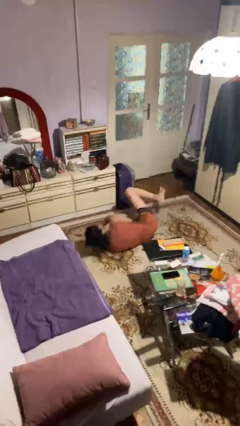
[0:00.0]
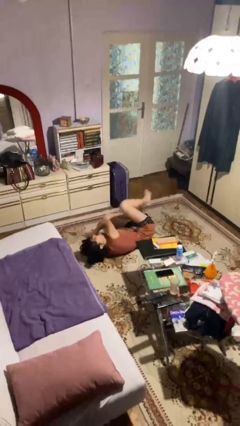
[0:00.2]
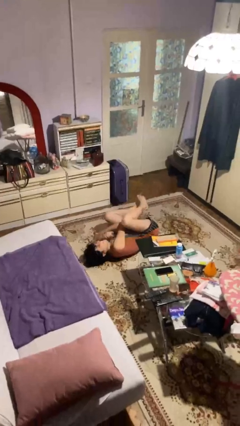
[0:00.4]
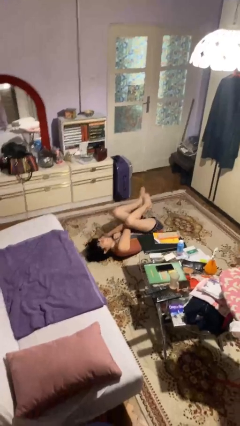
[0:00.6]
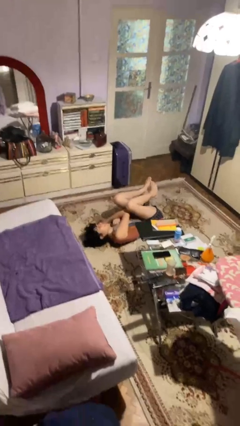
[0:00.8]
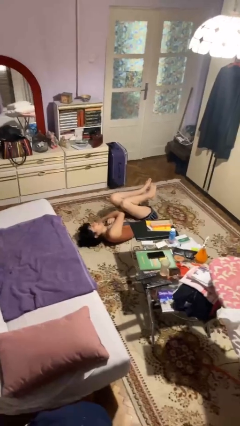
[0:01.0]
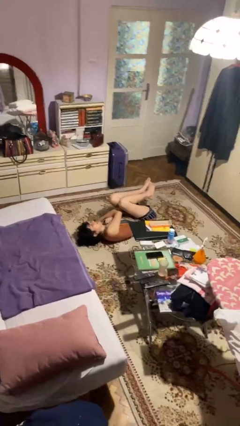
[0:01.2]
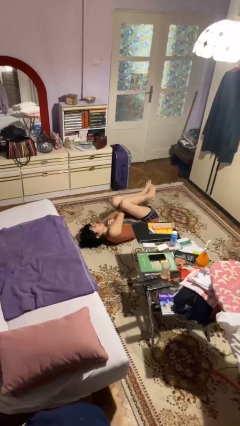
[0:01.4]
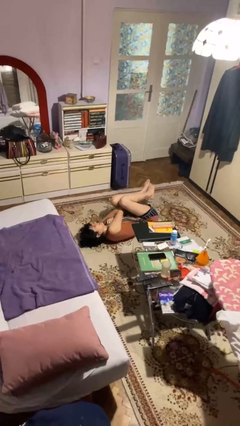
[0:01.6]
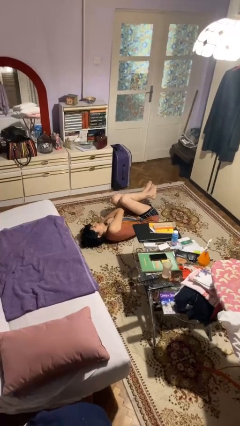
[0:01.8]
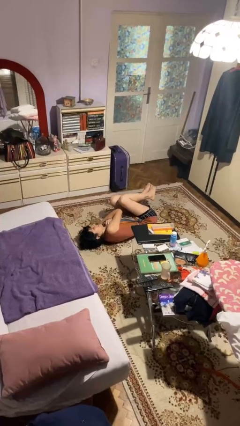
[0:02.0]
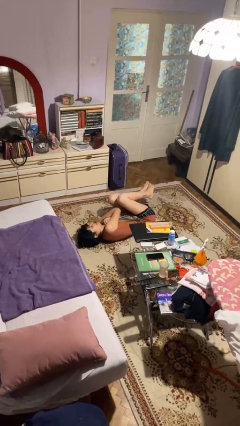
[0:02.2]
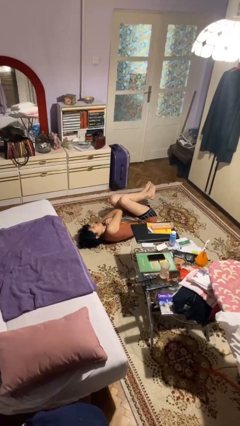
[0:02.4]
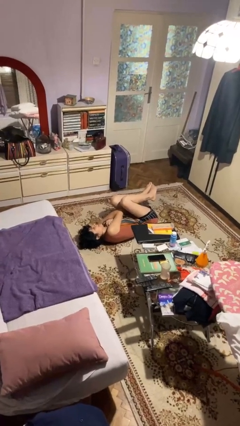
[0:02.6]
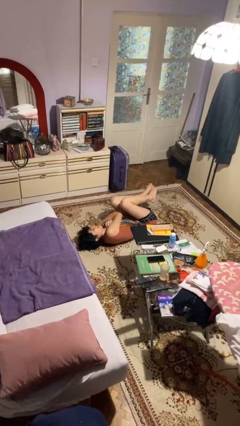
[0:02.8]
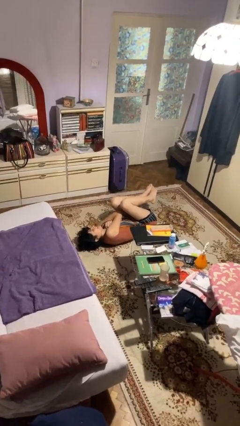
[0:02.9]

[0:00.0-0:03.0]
person lies down on floor

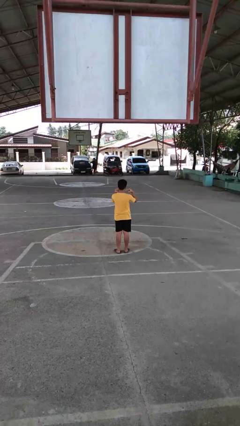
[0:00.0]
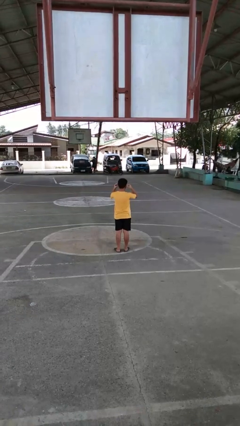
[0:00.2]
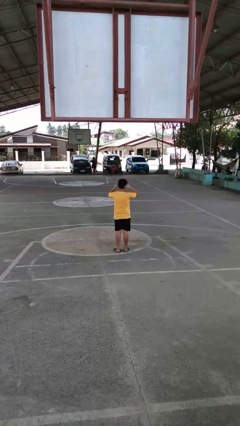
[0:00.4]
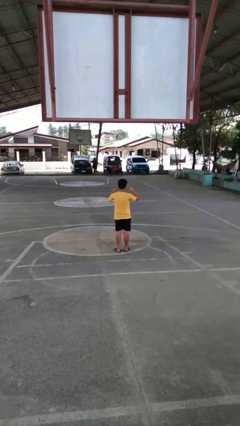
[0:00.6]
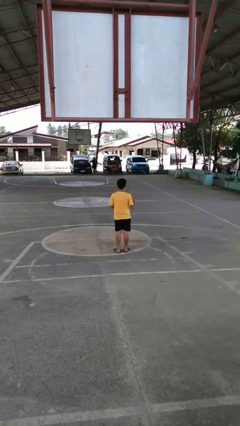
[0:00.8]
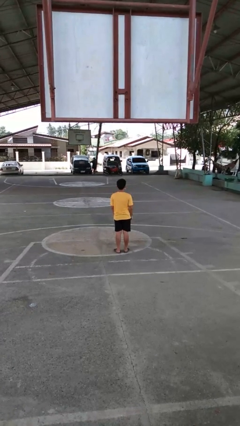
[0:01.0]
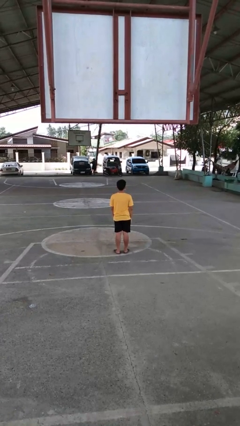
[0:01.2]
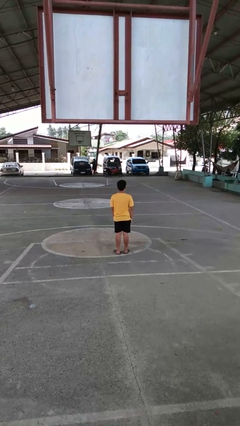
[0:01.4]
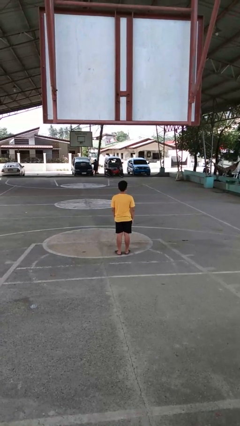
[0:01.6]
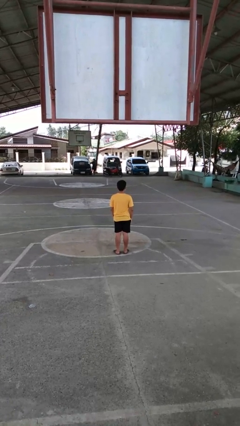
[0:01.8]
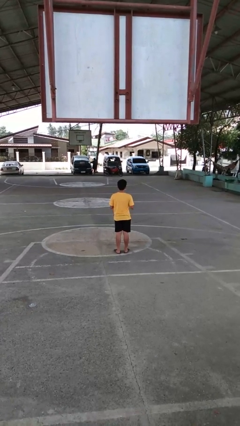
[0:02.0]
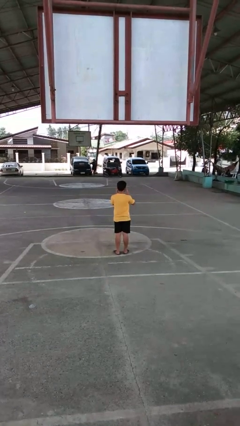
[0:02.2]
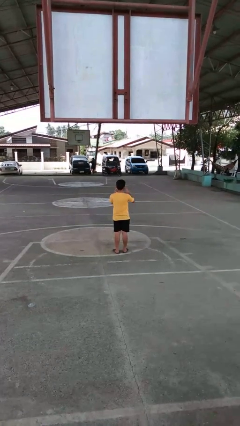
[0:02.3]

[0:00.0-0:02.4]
person puts on facemask

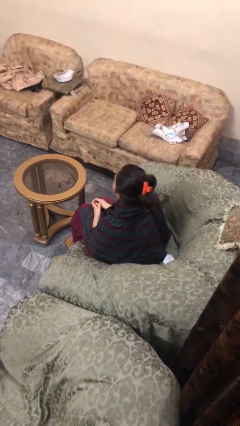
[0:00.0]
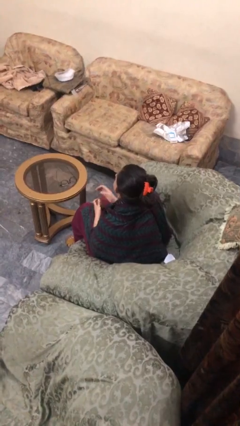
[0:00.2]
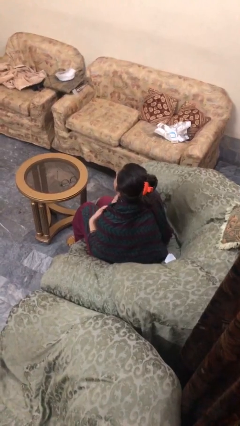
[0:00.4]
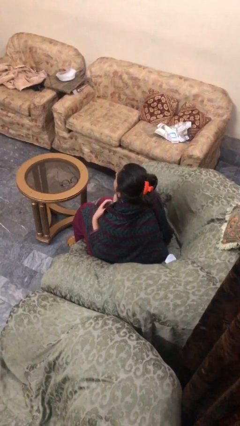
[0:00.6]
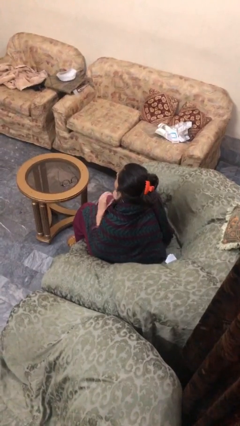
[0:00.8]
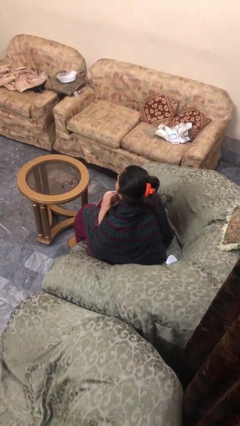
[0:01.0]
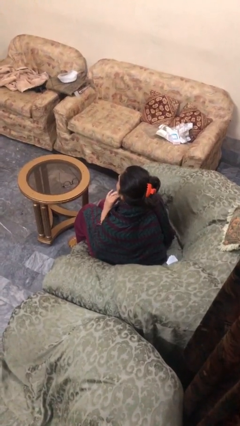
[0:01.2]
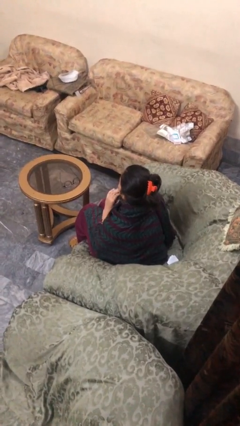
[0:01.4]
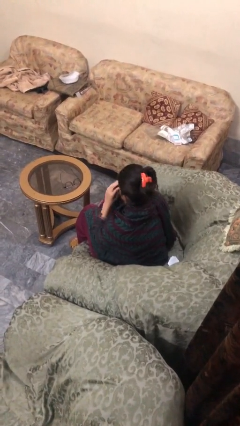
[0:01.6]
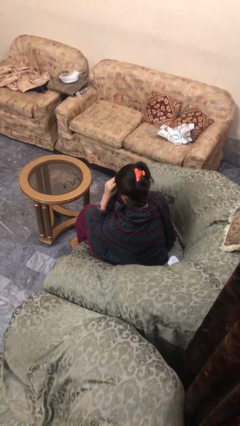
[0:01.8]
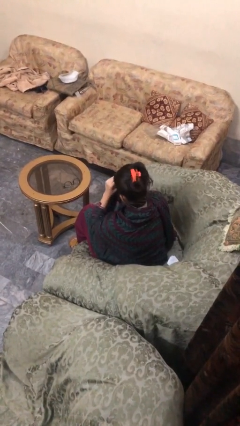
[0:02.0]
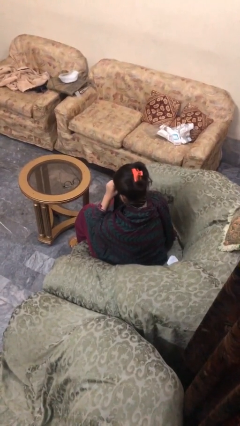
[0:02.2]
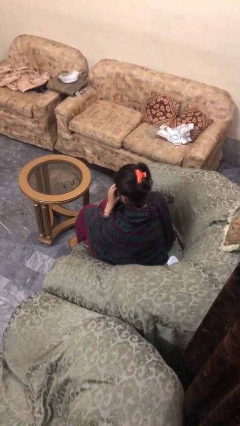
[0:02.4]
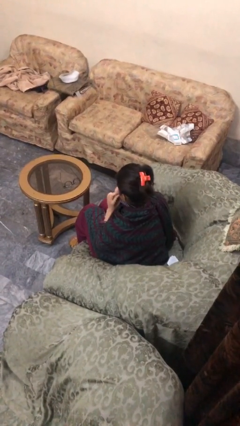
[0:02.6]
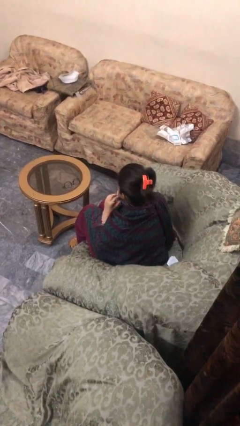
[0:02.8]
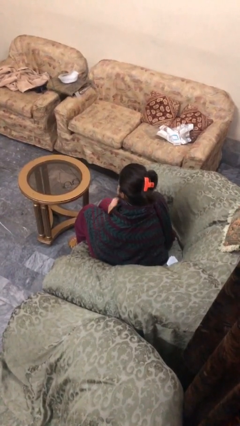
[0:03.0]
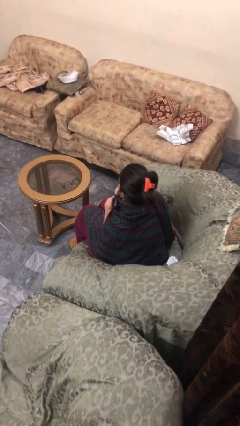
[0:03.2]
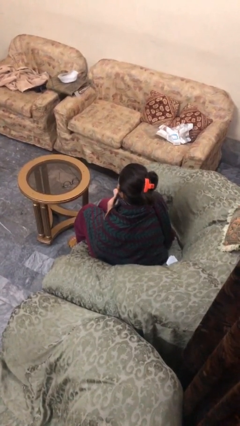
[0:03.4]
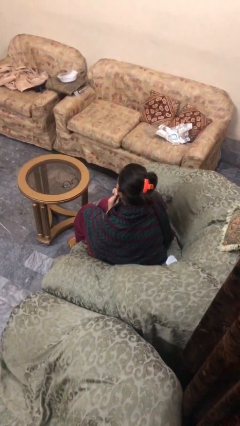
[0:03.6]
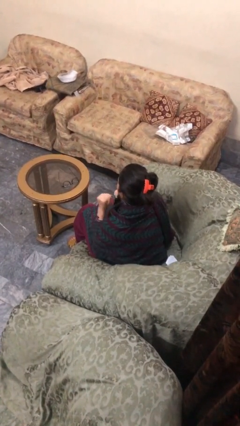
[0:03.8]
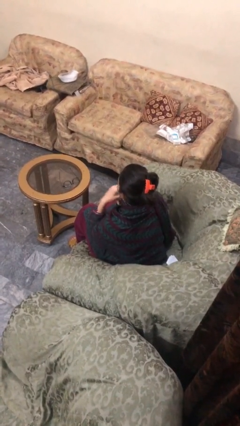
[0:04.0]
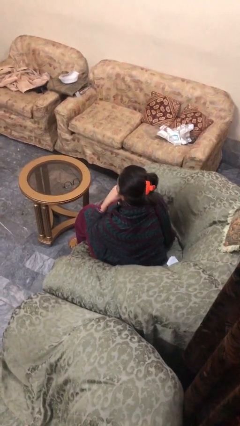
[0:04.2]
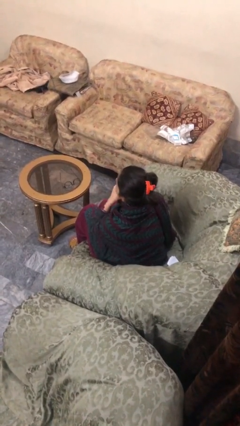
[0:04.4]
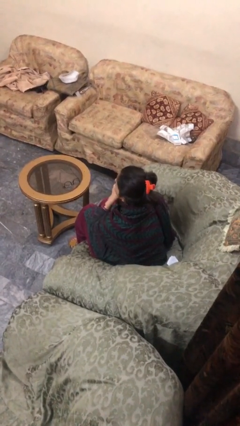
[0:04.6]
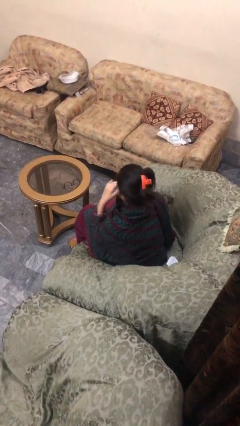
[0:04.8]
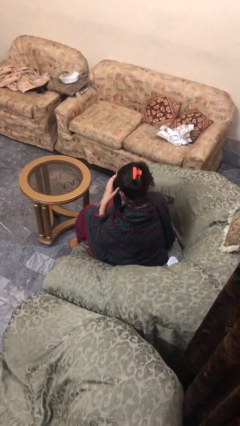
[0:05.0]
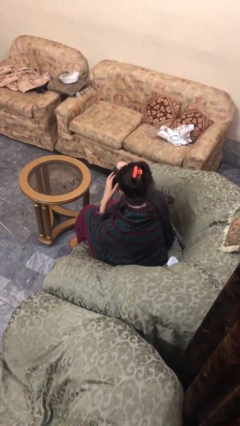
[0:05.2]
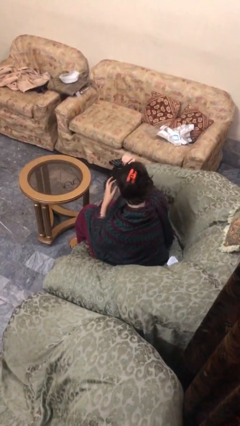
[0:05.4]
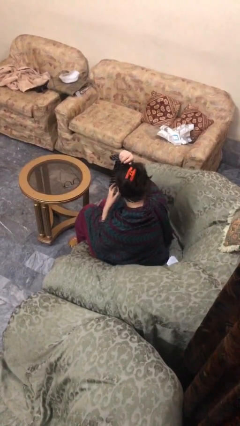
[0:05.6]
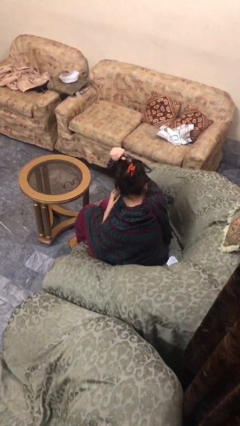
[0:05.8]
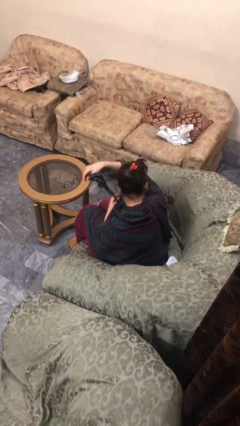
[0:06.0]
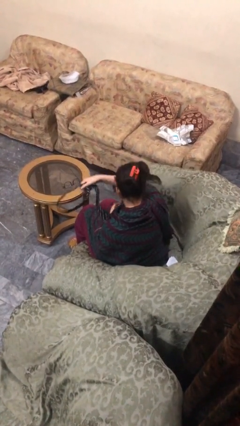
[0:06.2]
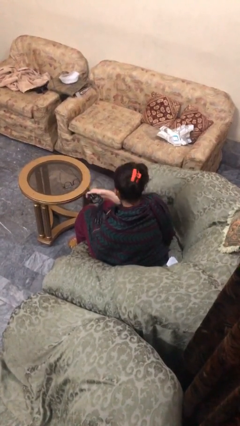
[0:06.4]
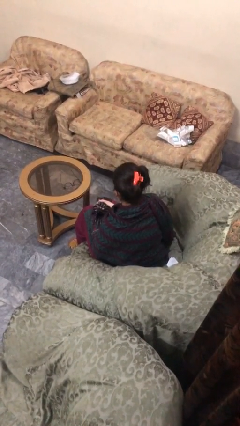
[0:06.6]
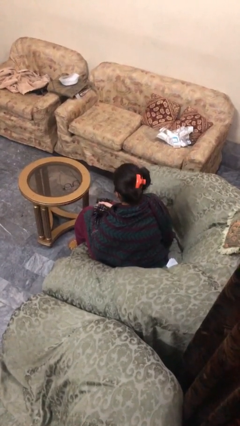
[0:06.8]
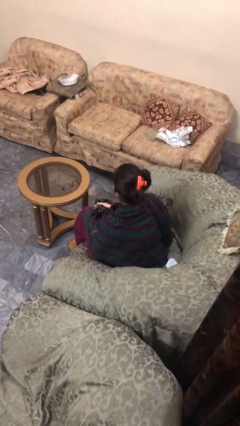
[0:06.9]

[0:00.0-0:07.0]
person takes off necktie

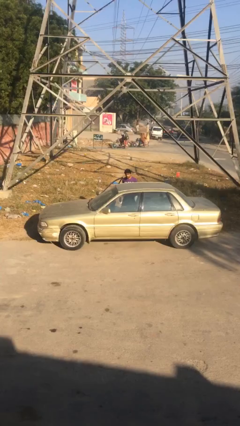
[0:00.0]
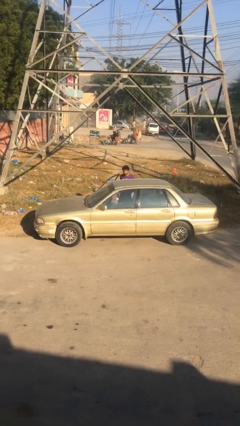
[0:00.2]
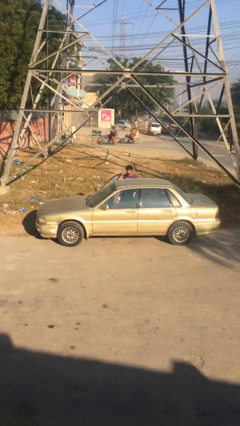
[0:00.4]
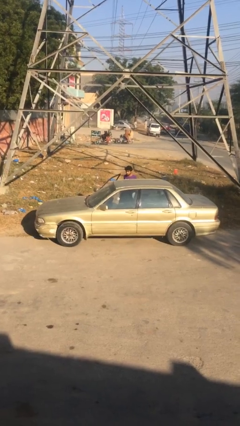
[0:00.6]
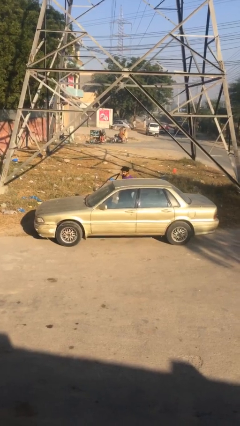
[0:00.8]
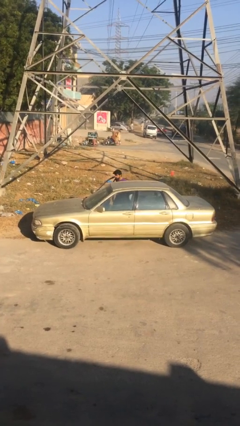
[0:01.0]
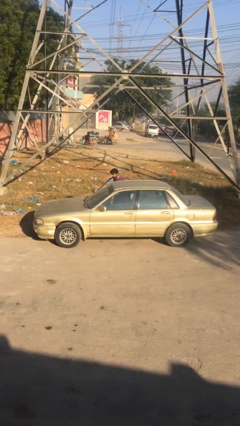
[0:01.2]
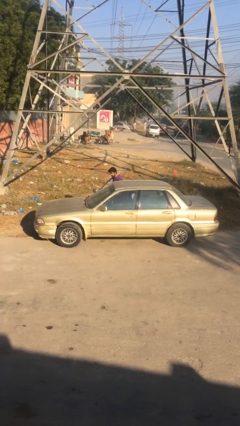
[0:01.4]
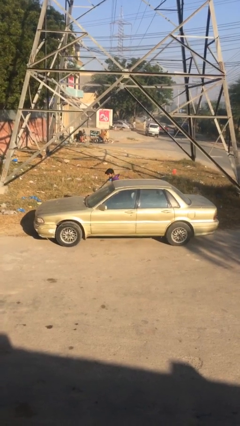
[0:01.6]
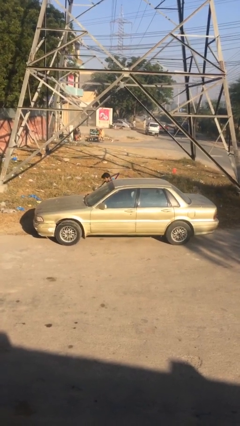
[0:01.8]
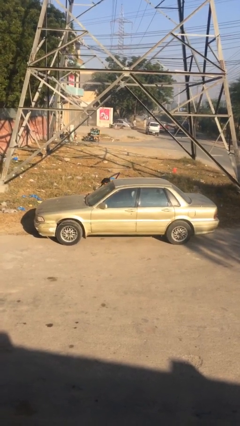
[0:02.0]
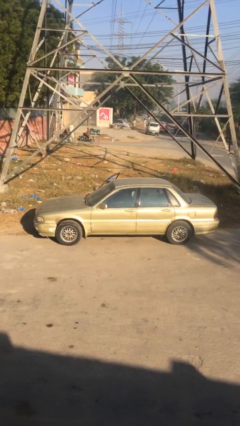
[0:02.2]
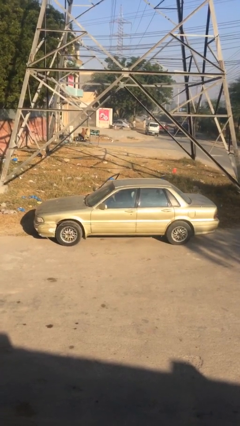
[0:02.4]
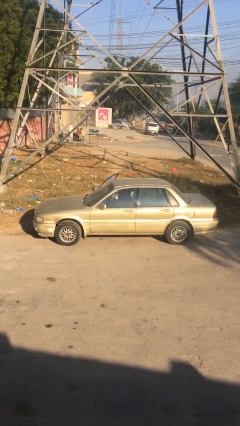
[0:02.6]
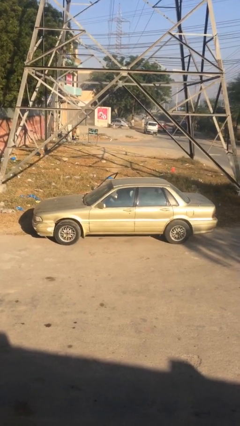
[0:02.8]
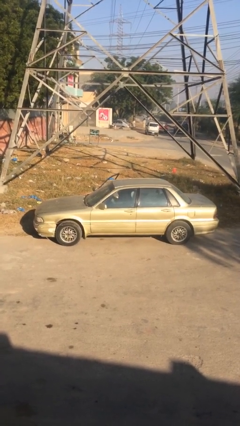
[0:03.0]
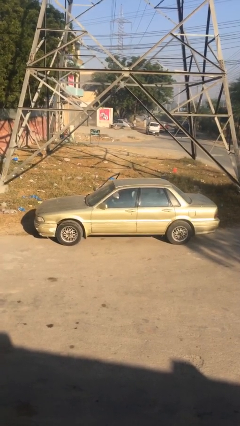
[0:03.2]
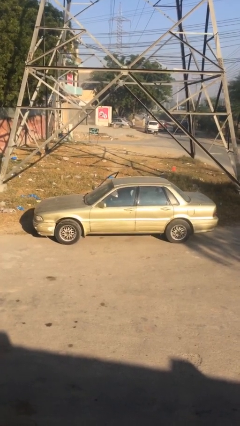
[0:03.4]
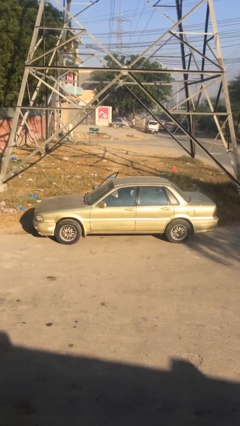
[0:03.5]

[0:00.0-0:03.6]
person enters car

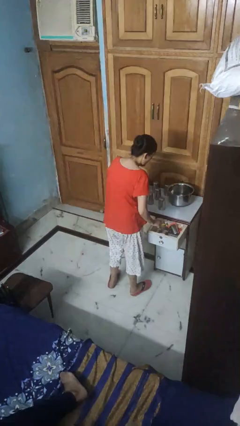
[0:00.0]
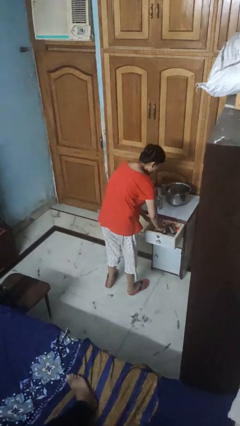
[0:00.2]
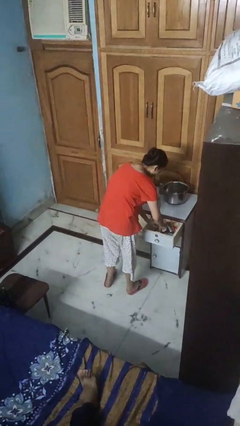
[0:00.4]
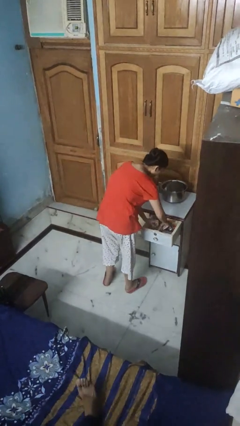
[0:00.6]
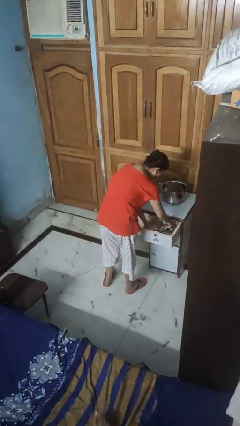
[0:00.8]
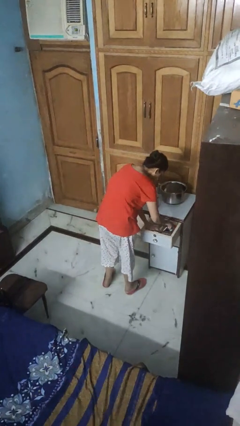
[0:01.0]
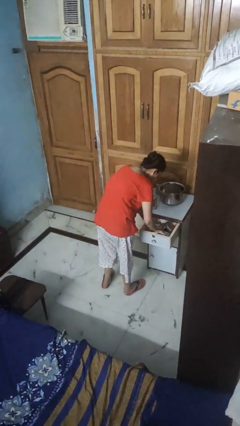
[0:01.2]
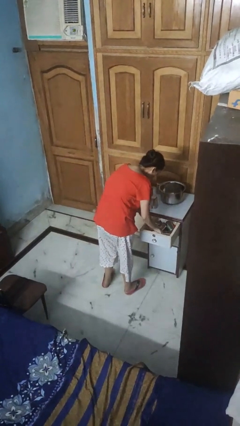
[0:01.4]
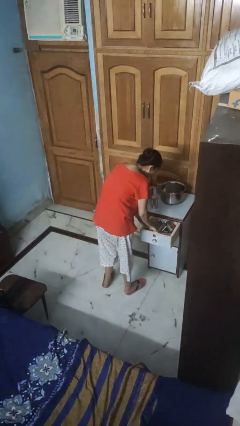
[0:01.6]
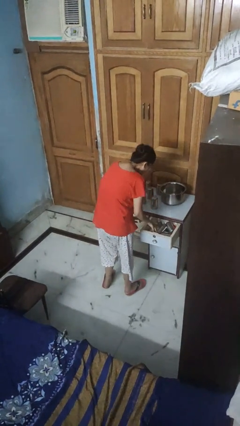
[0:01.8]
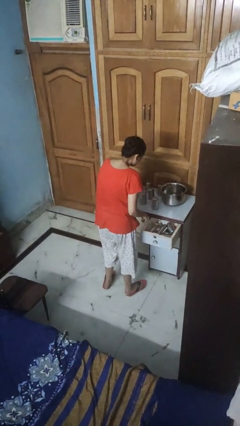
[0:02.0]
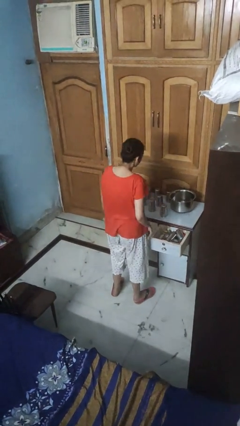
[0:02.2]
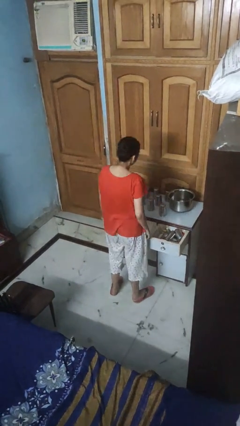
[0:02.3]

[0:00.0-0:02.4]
person searches in kitchen drawer
